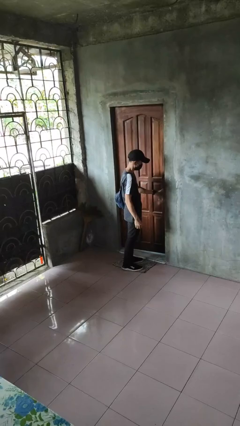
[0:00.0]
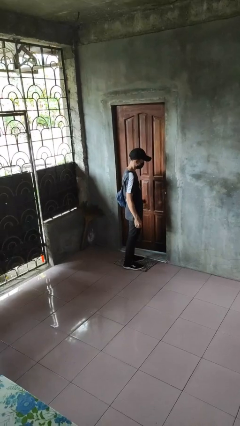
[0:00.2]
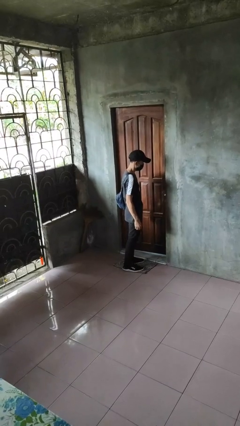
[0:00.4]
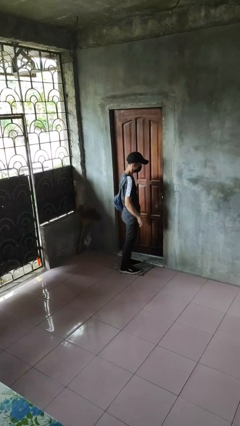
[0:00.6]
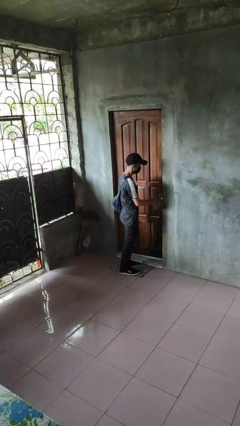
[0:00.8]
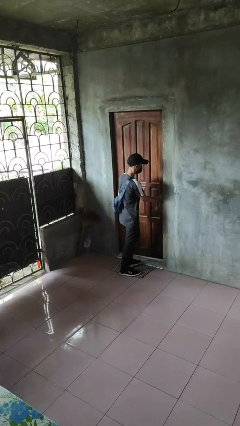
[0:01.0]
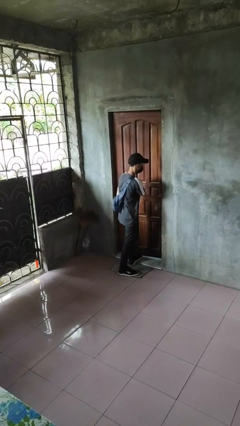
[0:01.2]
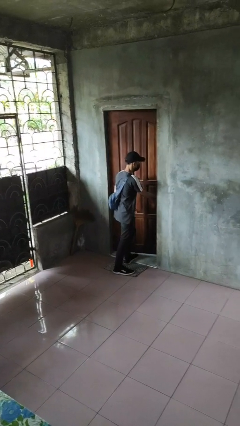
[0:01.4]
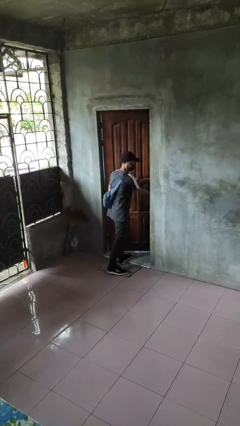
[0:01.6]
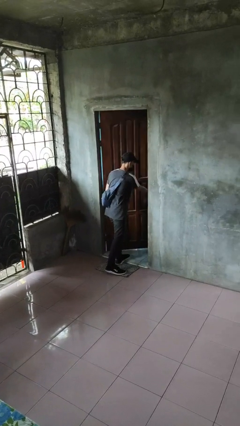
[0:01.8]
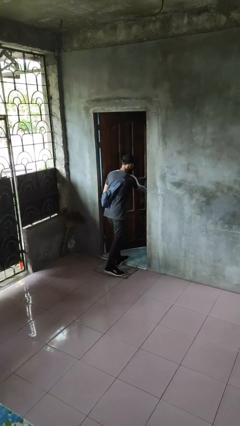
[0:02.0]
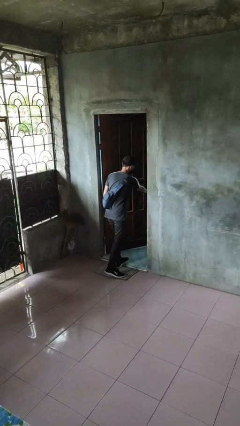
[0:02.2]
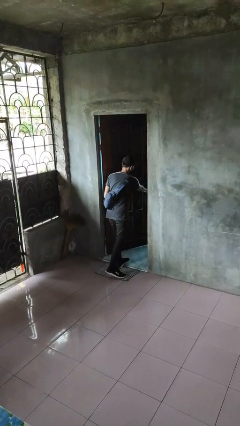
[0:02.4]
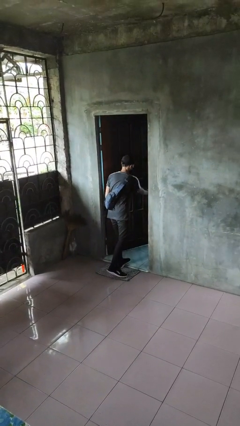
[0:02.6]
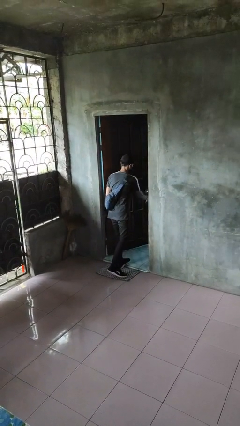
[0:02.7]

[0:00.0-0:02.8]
person opens facility door

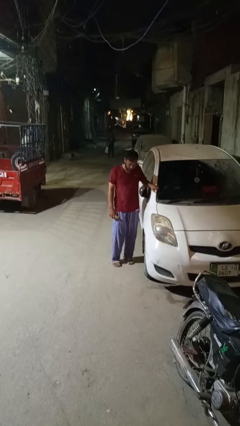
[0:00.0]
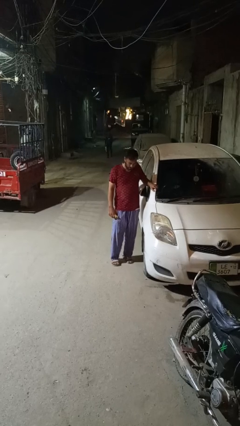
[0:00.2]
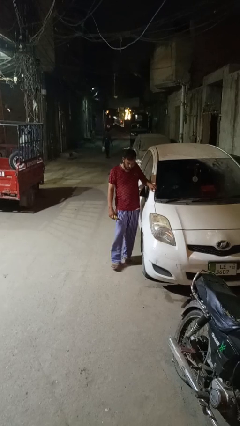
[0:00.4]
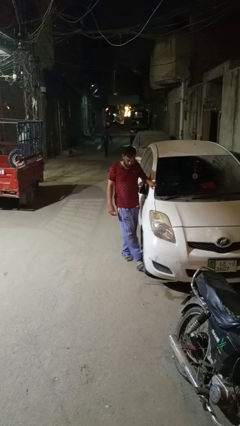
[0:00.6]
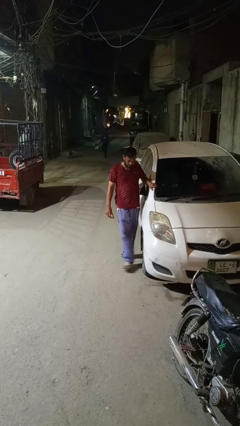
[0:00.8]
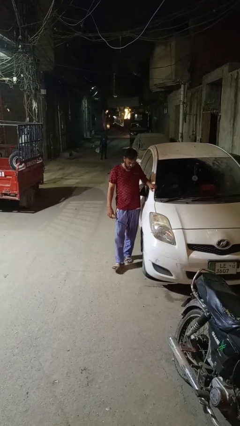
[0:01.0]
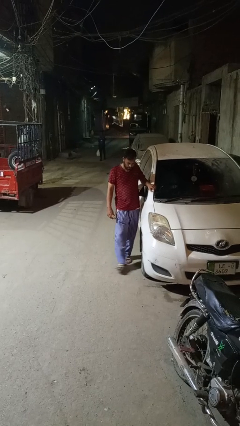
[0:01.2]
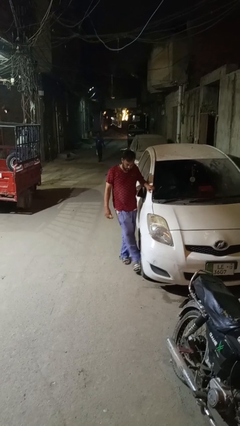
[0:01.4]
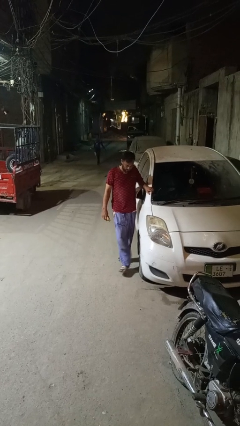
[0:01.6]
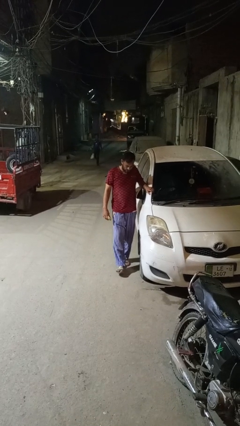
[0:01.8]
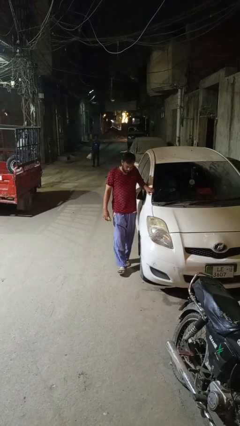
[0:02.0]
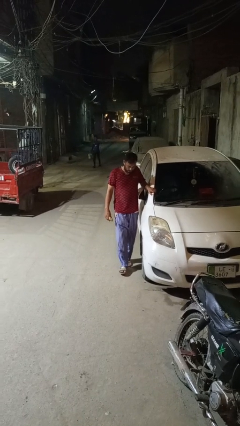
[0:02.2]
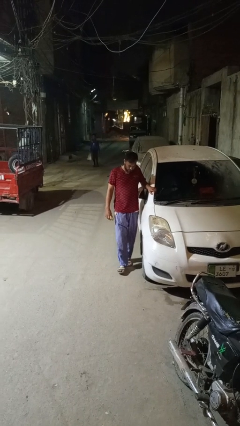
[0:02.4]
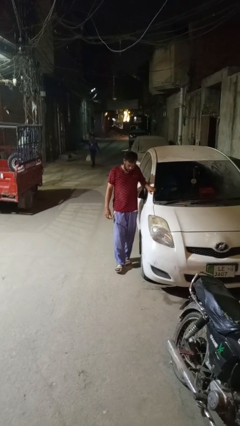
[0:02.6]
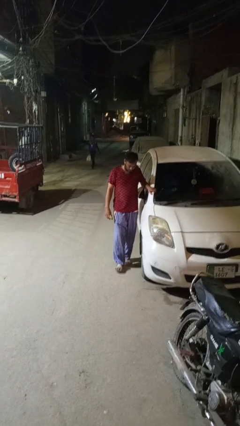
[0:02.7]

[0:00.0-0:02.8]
person kicks car tires

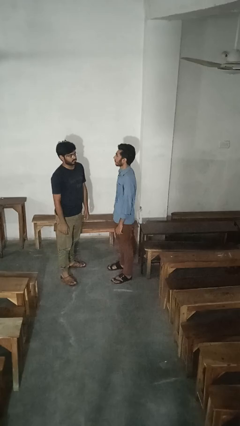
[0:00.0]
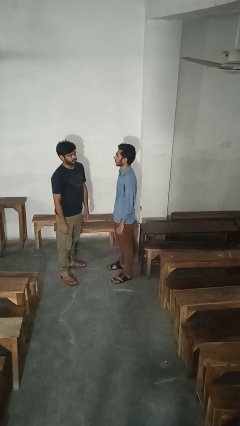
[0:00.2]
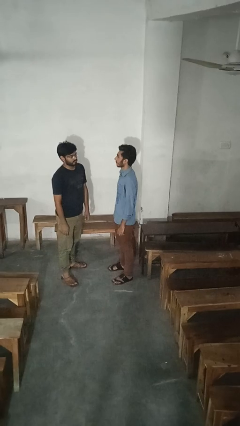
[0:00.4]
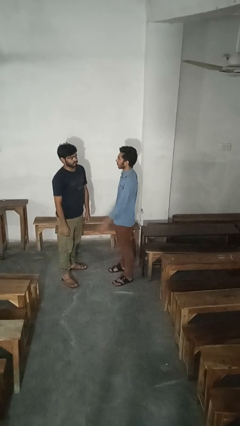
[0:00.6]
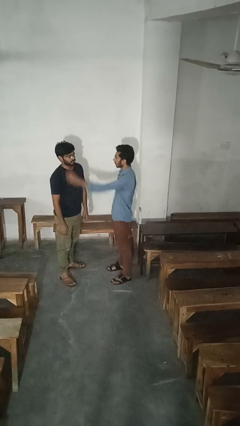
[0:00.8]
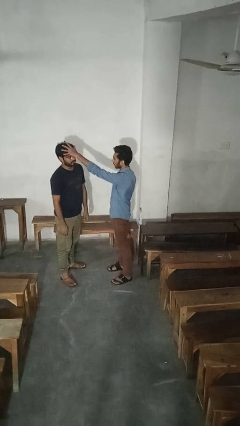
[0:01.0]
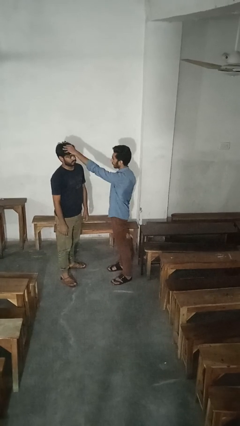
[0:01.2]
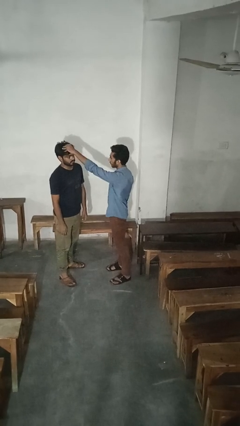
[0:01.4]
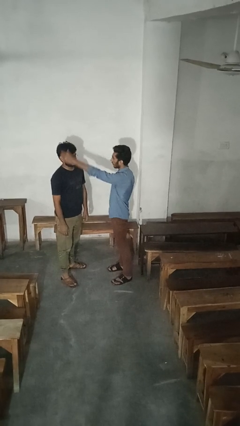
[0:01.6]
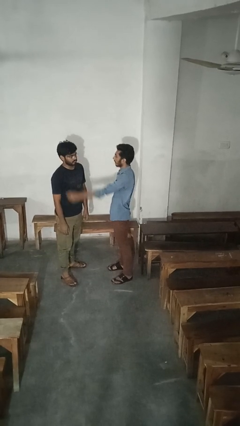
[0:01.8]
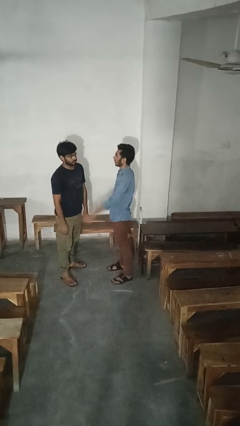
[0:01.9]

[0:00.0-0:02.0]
person grabs person by hair

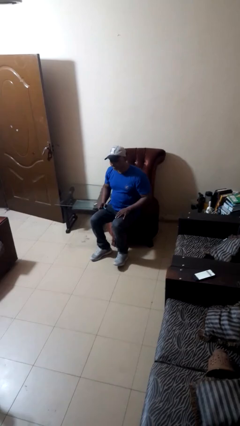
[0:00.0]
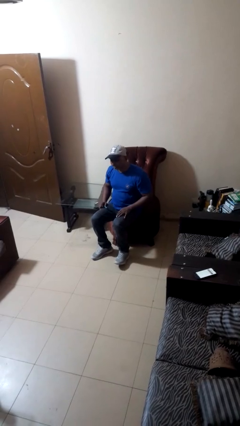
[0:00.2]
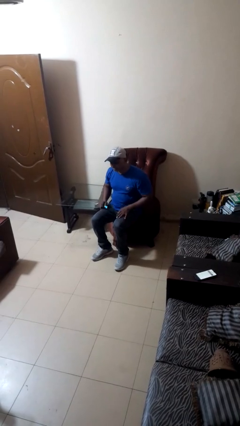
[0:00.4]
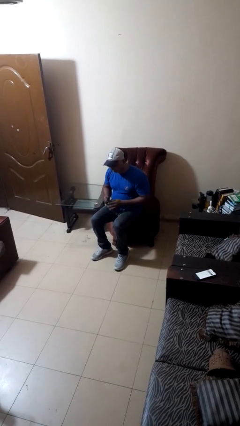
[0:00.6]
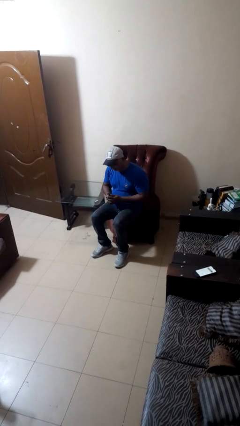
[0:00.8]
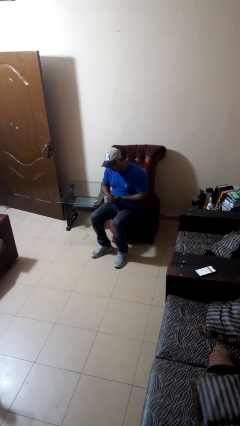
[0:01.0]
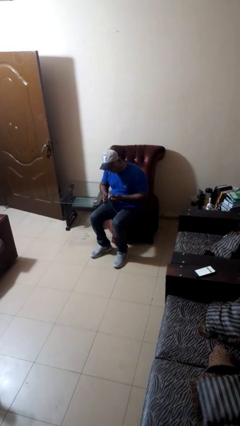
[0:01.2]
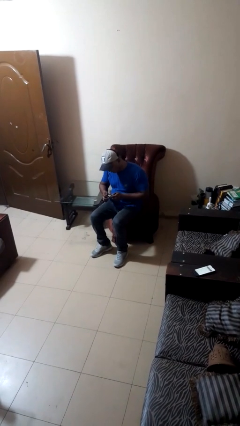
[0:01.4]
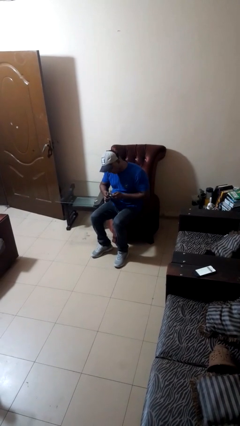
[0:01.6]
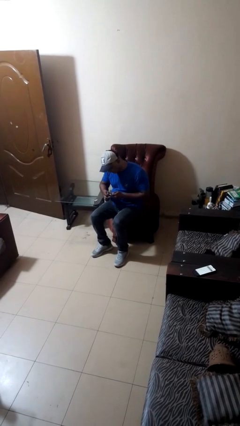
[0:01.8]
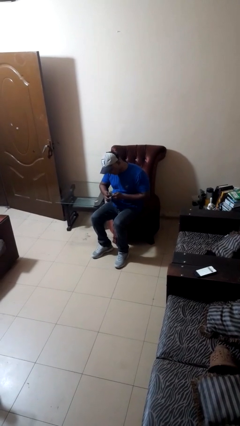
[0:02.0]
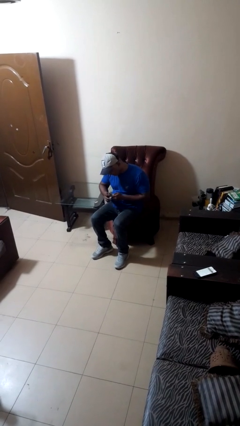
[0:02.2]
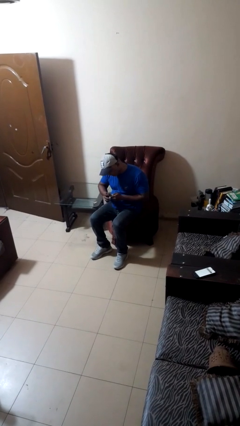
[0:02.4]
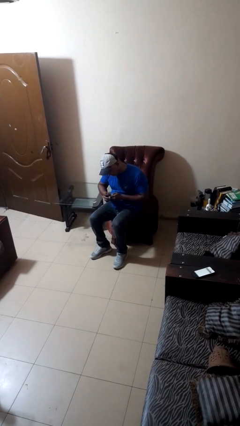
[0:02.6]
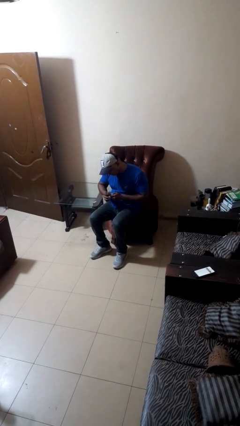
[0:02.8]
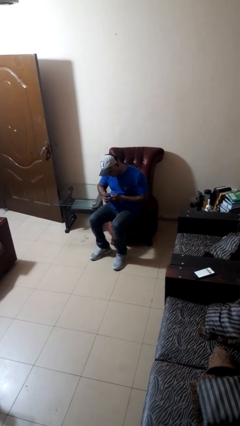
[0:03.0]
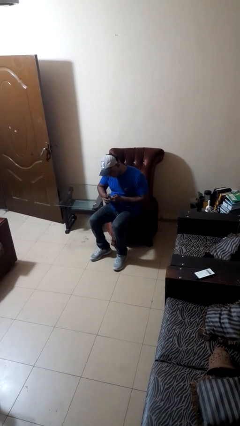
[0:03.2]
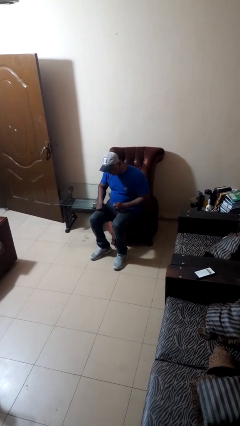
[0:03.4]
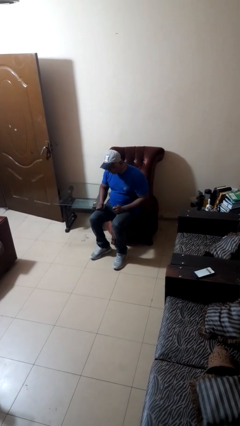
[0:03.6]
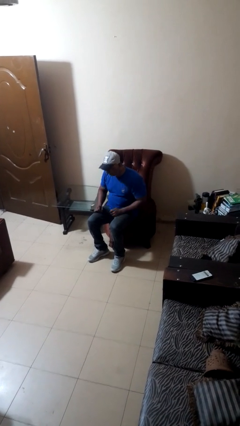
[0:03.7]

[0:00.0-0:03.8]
person files fingernails

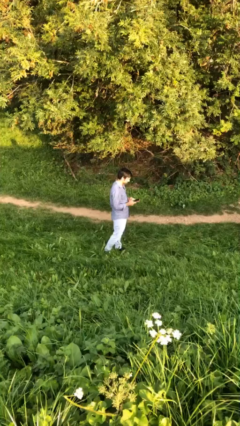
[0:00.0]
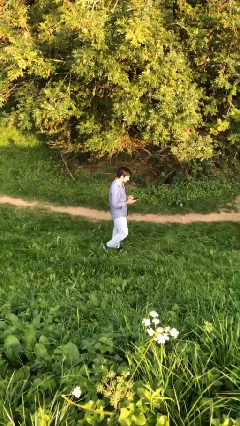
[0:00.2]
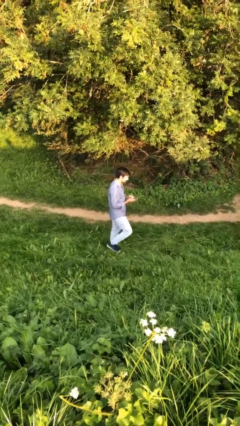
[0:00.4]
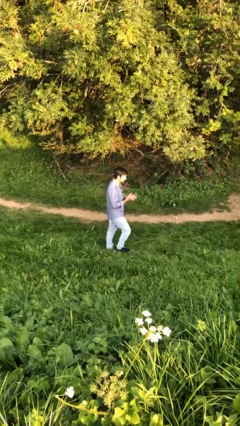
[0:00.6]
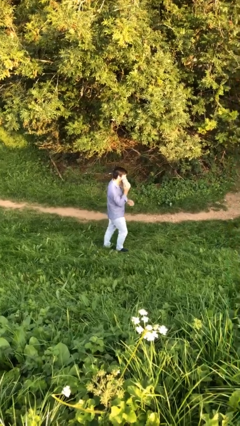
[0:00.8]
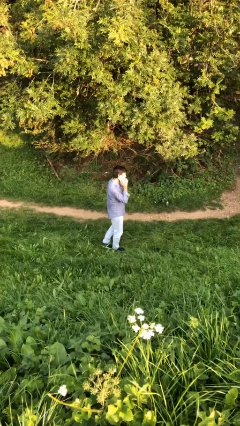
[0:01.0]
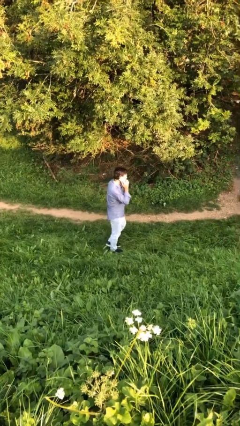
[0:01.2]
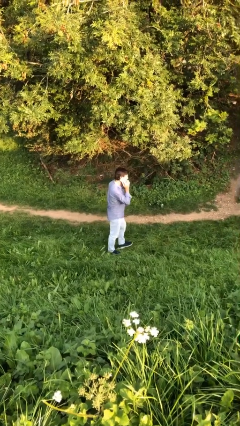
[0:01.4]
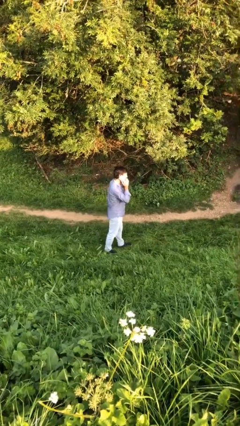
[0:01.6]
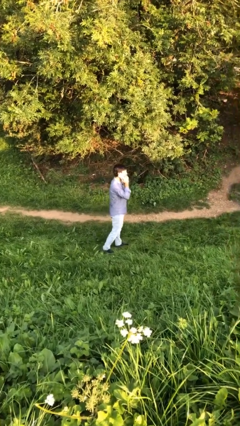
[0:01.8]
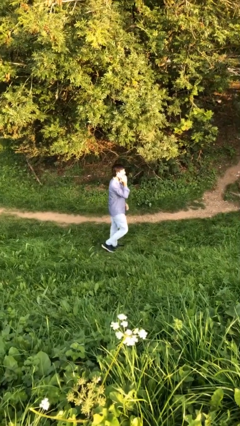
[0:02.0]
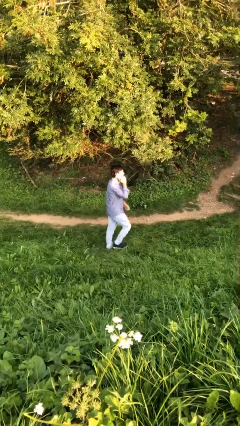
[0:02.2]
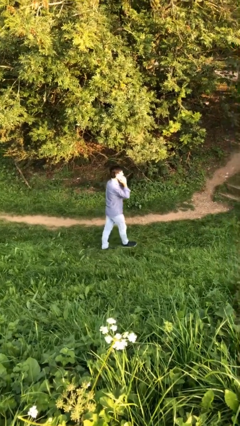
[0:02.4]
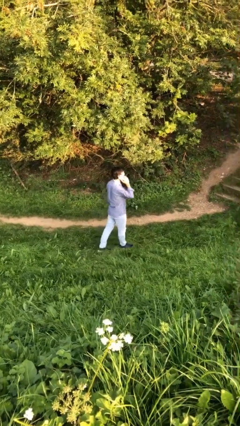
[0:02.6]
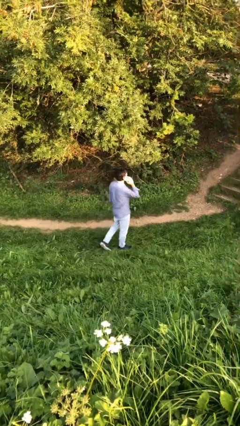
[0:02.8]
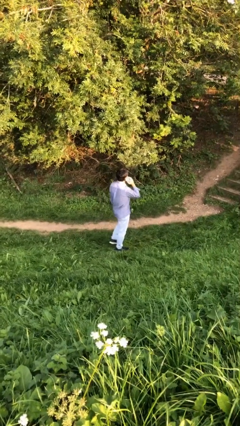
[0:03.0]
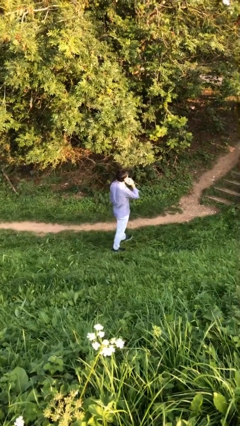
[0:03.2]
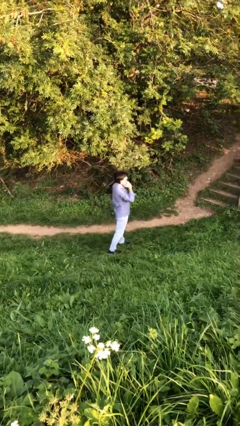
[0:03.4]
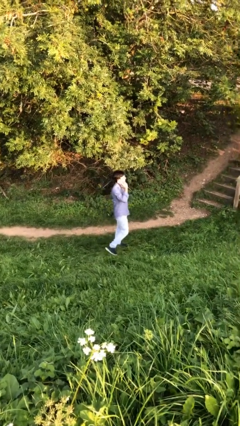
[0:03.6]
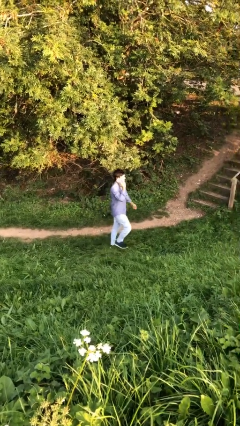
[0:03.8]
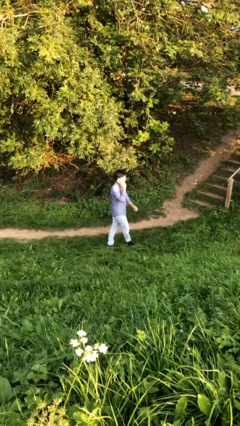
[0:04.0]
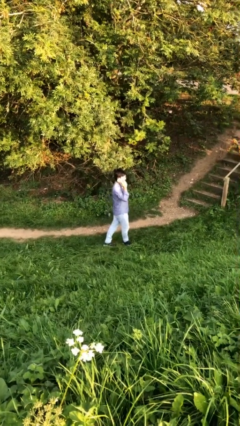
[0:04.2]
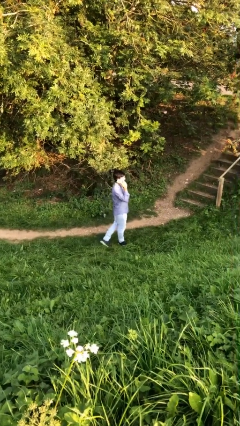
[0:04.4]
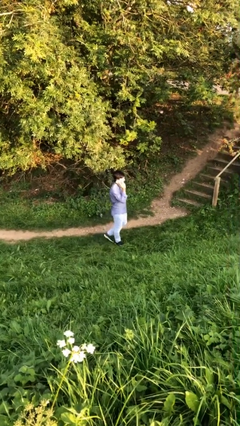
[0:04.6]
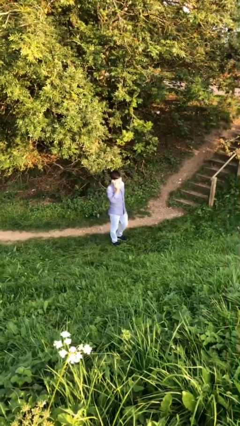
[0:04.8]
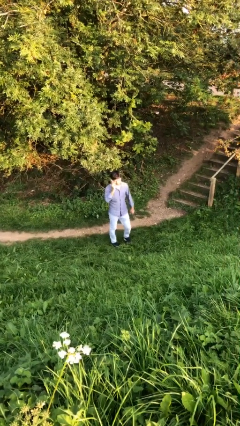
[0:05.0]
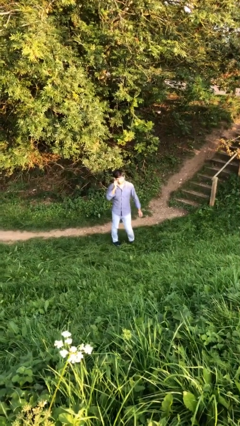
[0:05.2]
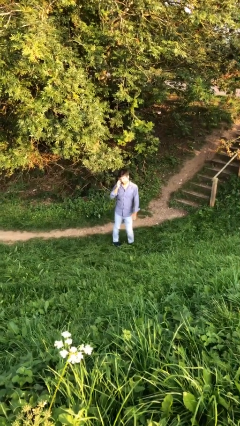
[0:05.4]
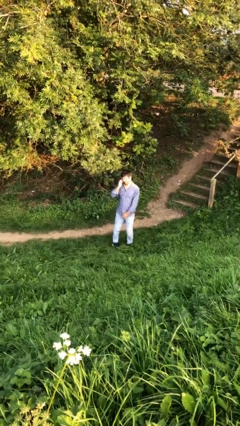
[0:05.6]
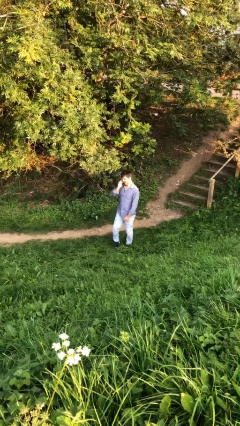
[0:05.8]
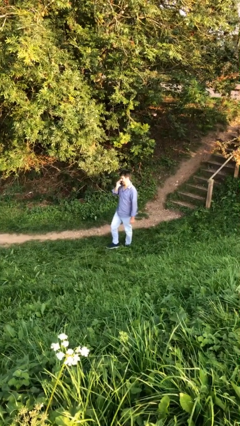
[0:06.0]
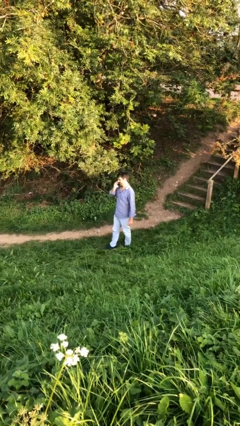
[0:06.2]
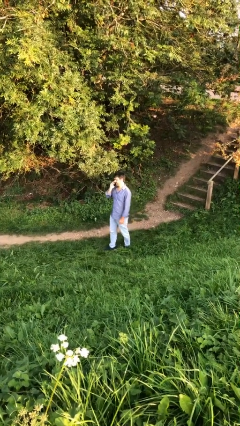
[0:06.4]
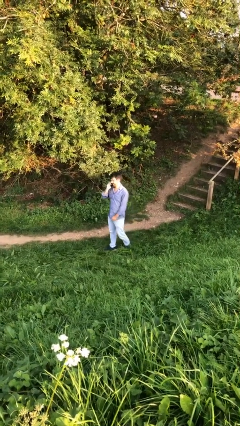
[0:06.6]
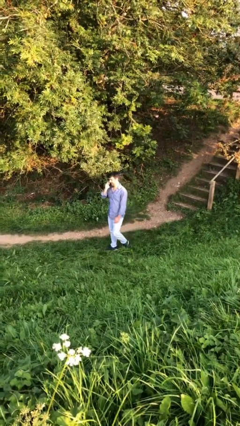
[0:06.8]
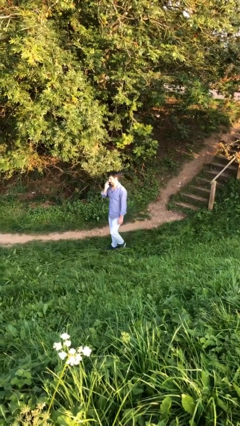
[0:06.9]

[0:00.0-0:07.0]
person talks on phone
